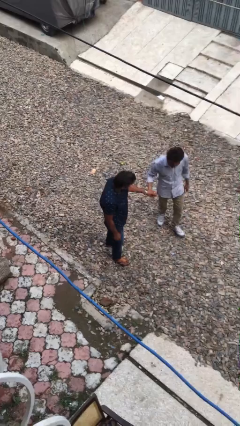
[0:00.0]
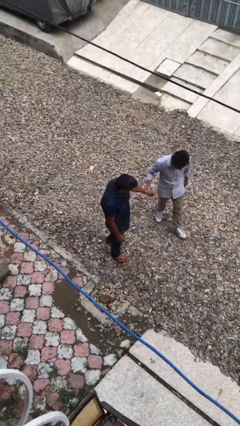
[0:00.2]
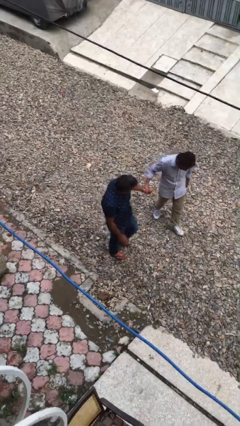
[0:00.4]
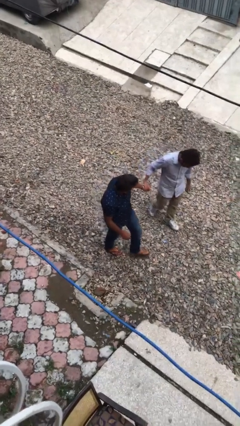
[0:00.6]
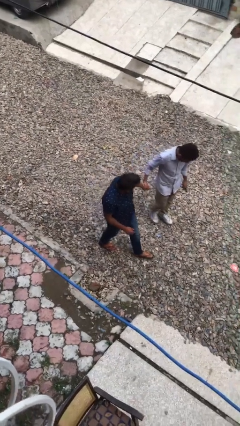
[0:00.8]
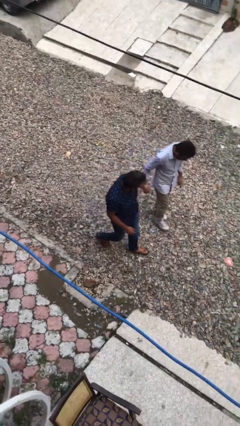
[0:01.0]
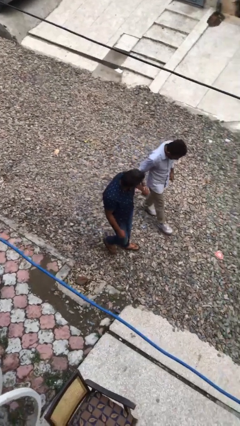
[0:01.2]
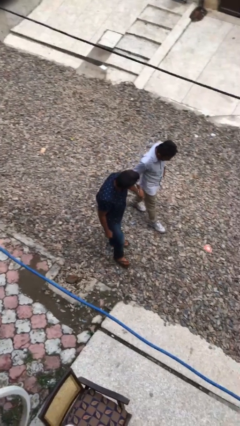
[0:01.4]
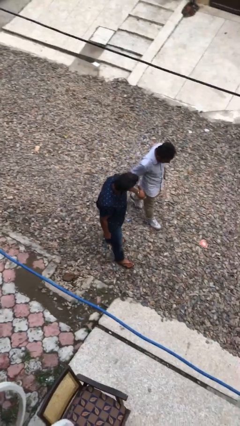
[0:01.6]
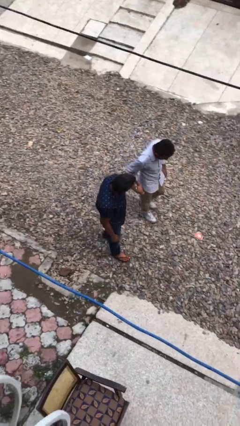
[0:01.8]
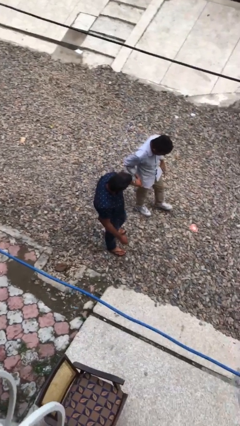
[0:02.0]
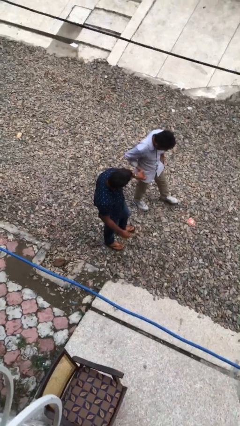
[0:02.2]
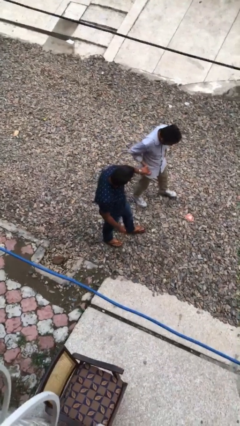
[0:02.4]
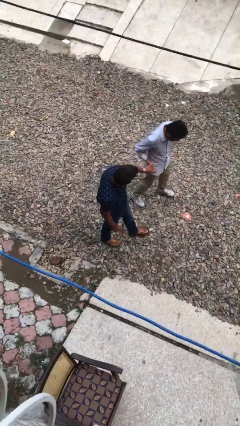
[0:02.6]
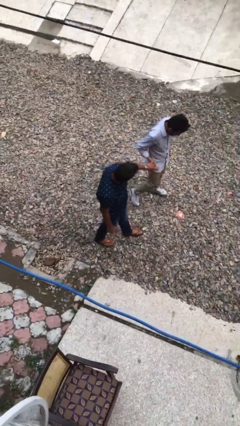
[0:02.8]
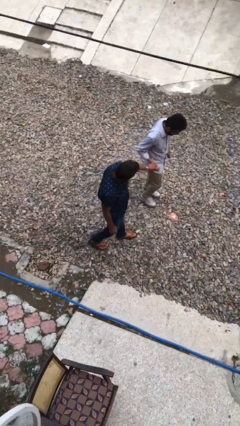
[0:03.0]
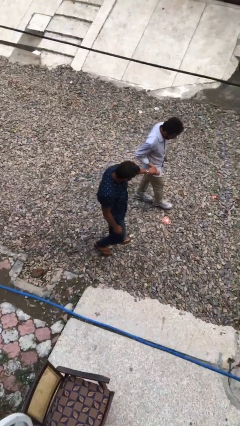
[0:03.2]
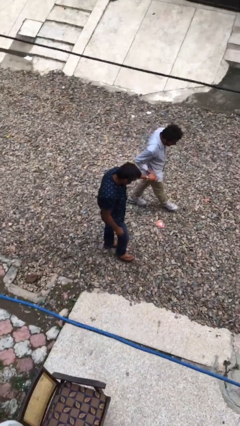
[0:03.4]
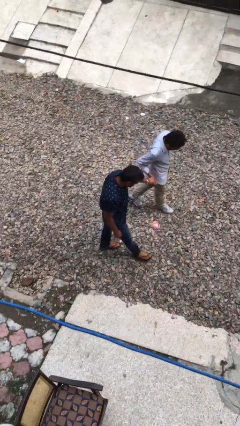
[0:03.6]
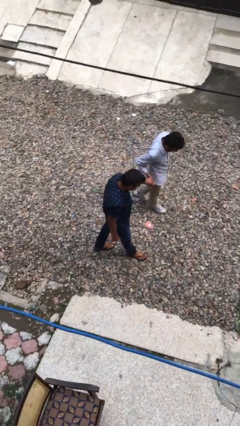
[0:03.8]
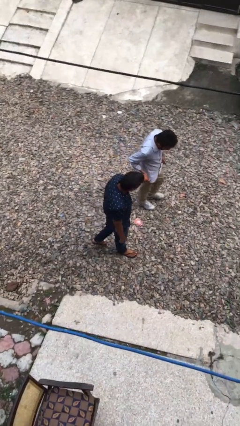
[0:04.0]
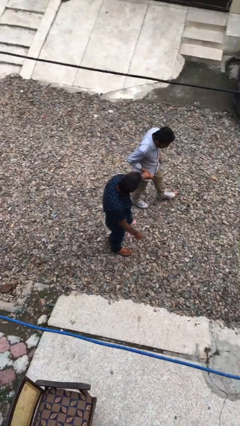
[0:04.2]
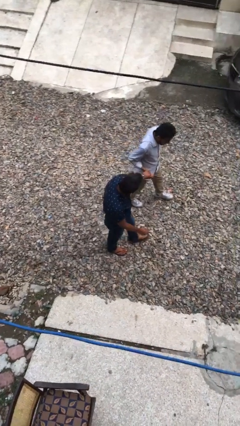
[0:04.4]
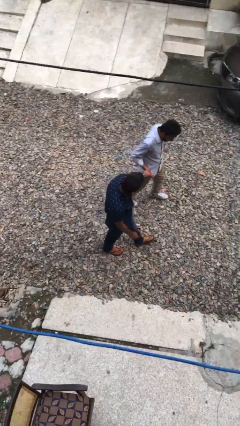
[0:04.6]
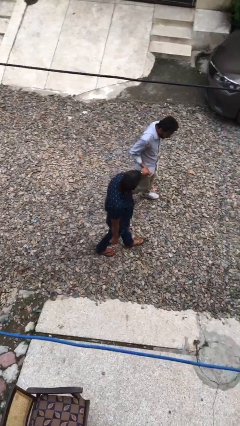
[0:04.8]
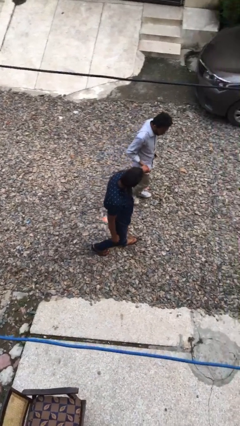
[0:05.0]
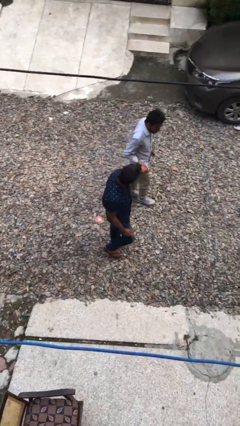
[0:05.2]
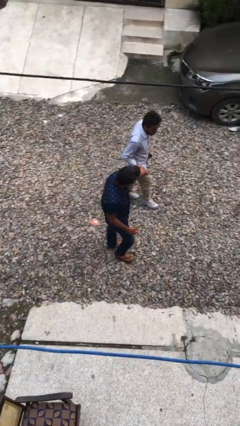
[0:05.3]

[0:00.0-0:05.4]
person holds hand

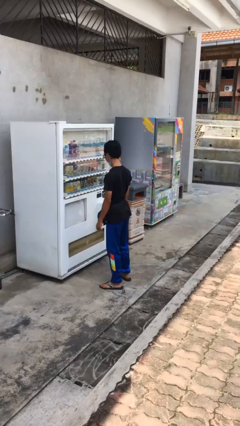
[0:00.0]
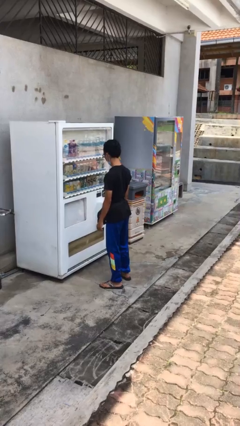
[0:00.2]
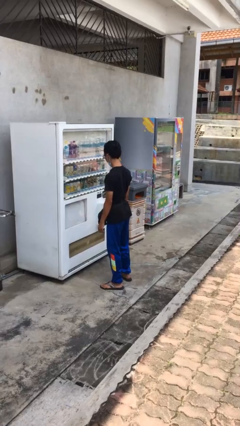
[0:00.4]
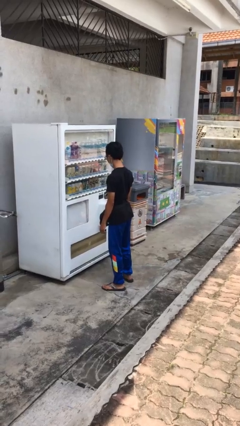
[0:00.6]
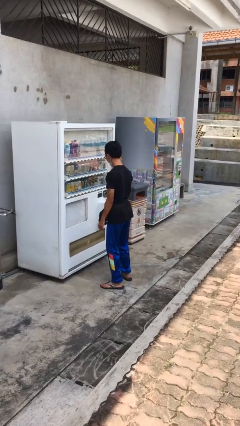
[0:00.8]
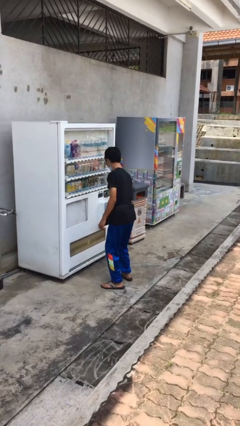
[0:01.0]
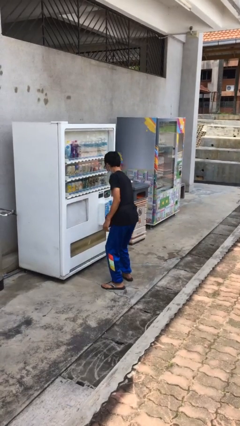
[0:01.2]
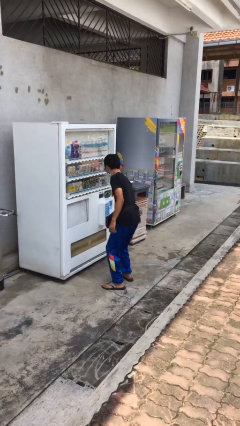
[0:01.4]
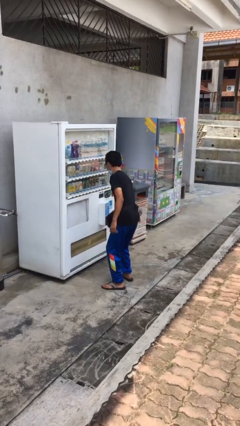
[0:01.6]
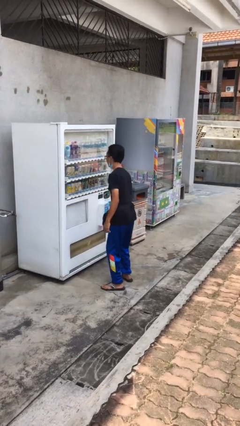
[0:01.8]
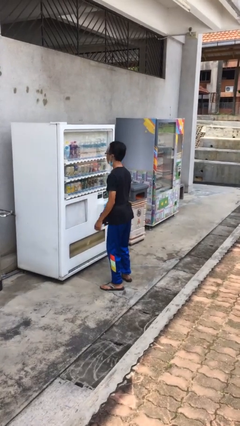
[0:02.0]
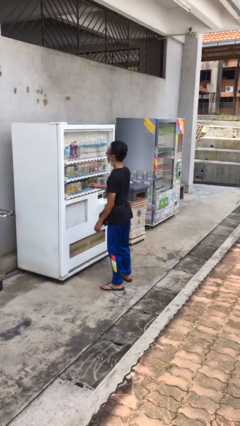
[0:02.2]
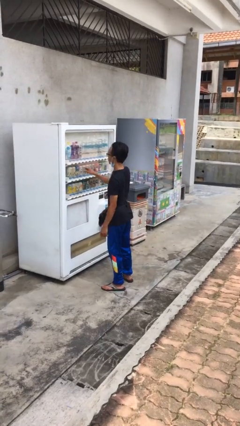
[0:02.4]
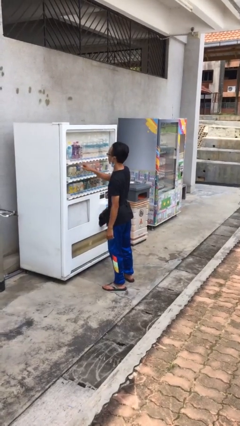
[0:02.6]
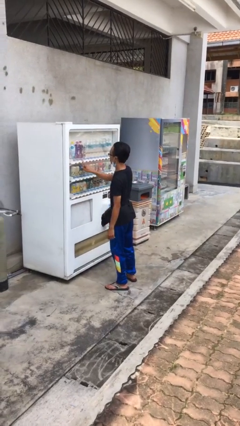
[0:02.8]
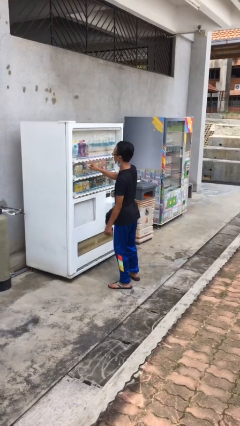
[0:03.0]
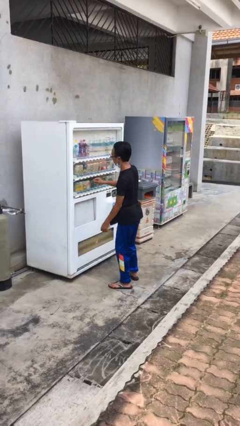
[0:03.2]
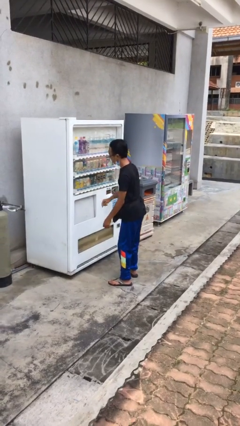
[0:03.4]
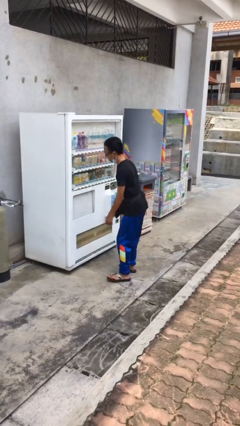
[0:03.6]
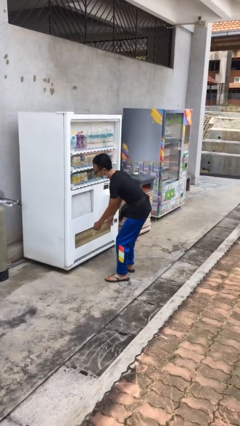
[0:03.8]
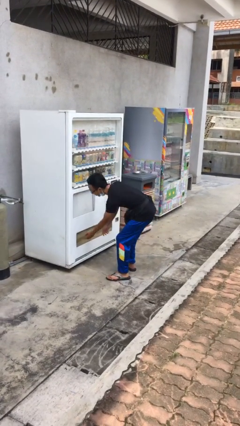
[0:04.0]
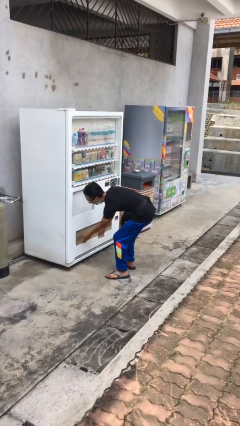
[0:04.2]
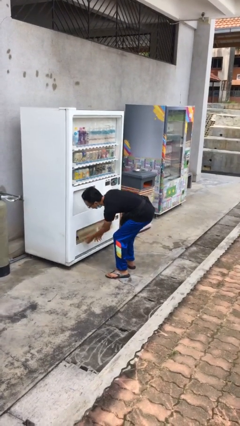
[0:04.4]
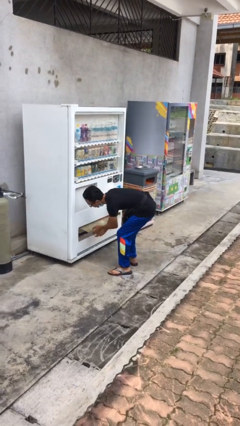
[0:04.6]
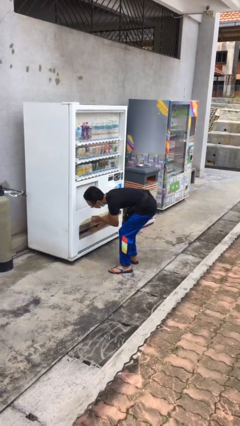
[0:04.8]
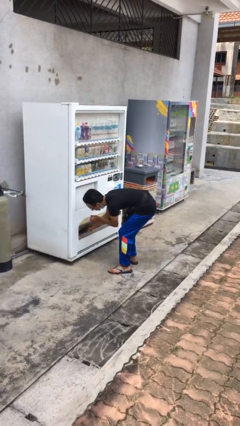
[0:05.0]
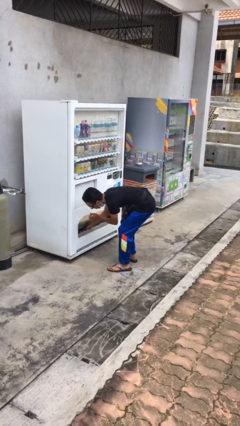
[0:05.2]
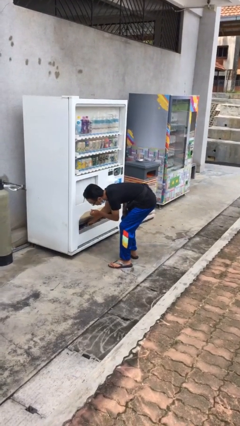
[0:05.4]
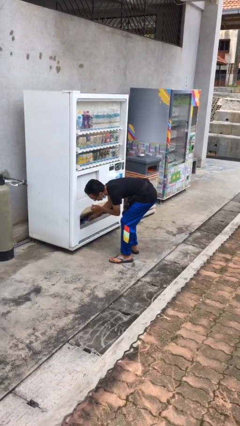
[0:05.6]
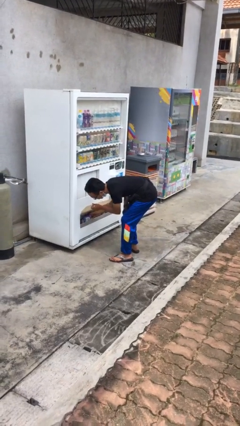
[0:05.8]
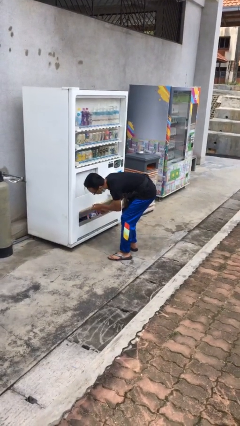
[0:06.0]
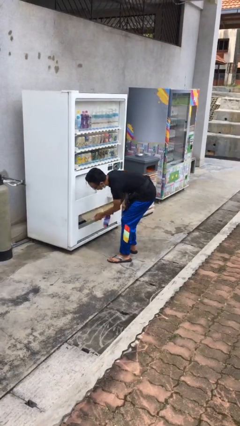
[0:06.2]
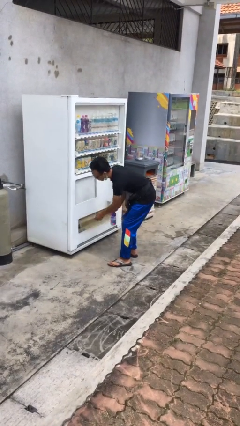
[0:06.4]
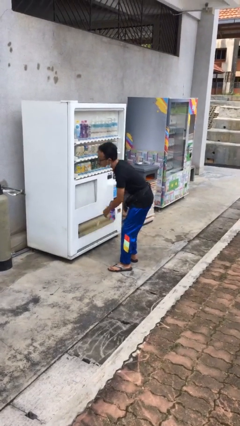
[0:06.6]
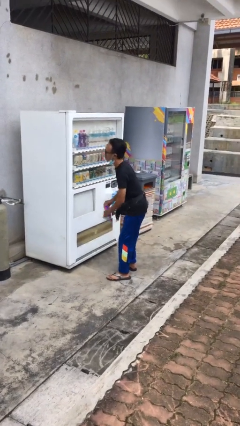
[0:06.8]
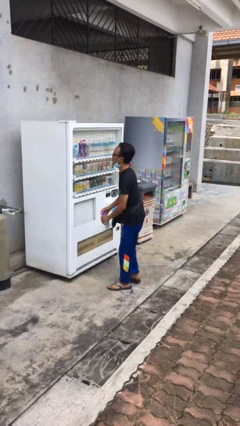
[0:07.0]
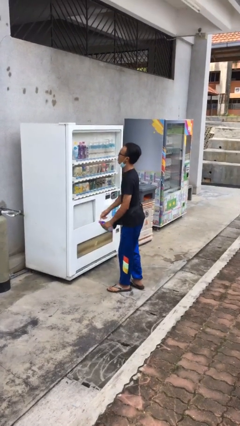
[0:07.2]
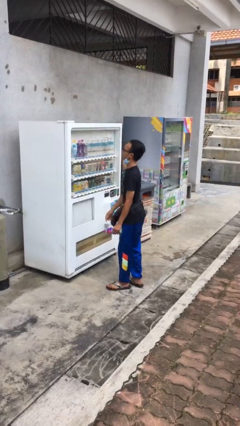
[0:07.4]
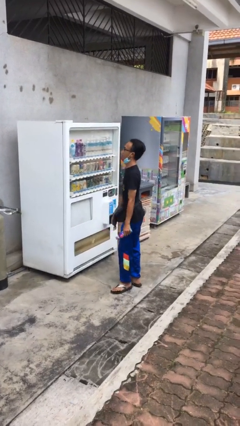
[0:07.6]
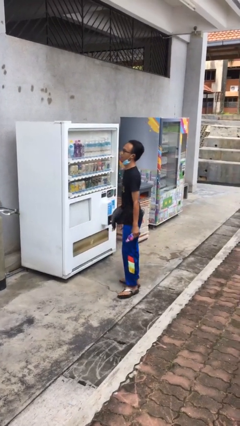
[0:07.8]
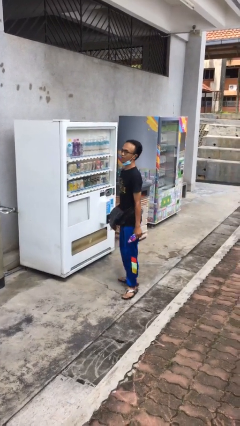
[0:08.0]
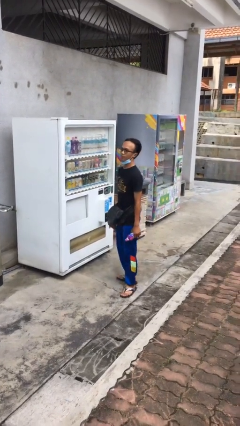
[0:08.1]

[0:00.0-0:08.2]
person purchases from machine

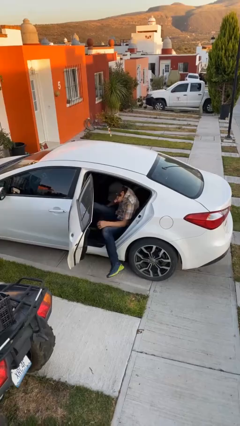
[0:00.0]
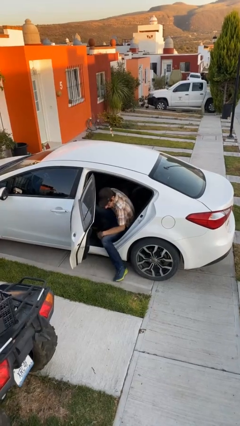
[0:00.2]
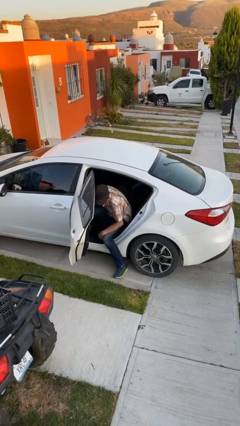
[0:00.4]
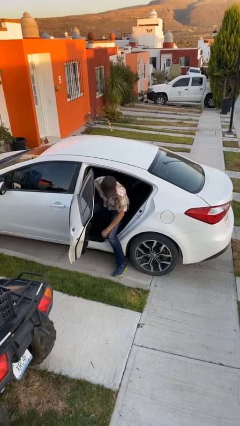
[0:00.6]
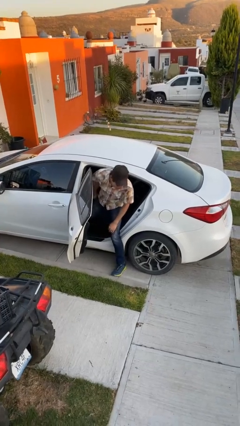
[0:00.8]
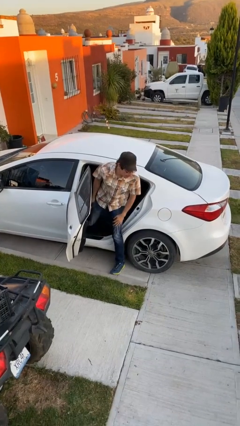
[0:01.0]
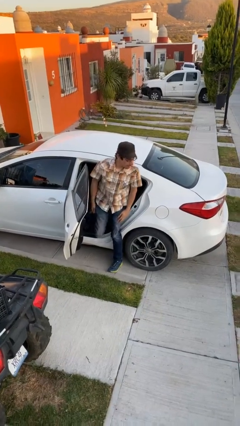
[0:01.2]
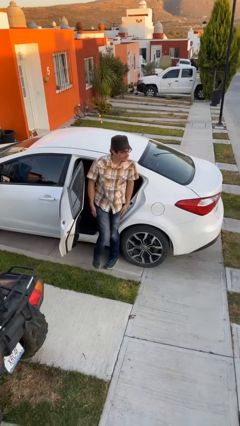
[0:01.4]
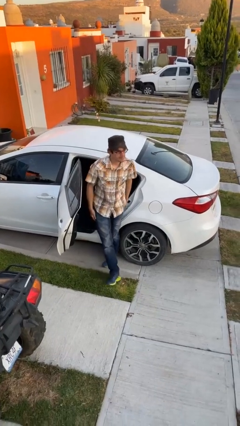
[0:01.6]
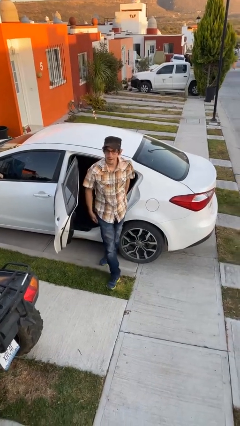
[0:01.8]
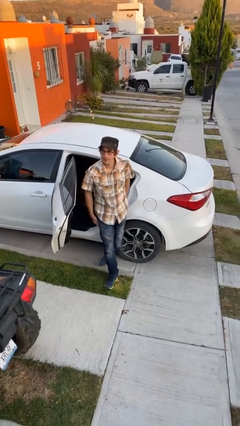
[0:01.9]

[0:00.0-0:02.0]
person exits car

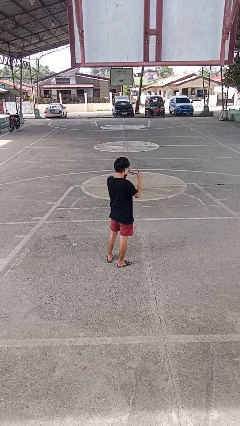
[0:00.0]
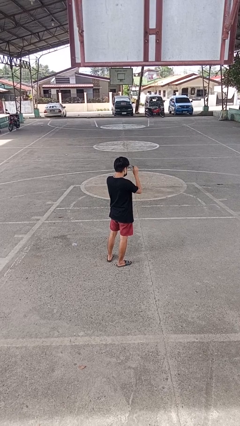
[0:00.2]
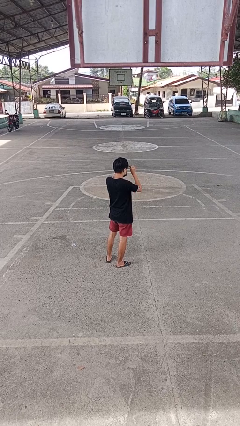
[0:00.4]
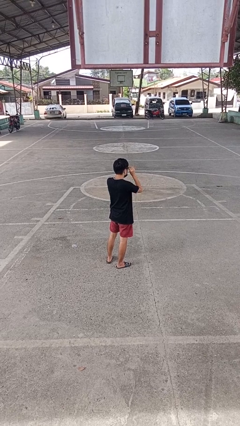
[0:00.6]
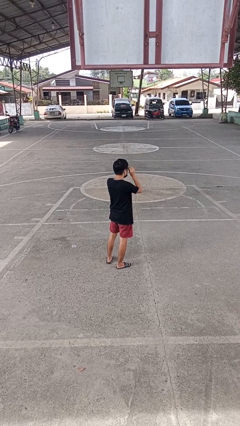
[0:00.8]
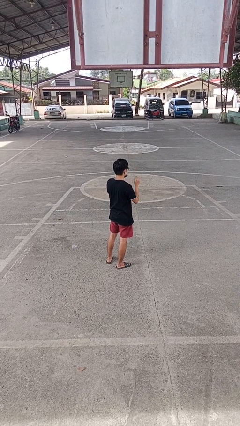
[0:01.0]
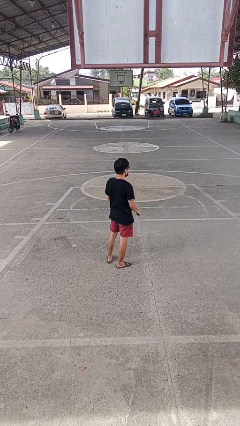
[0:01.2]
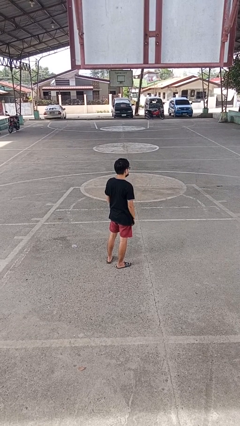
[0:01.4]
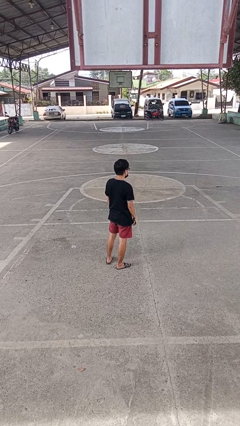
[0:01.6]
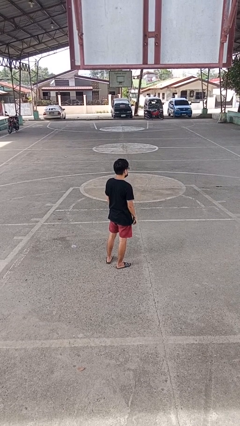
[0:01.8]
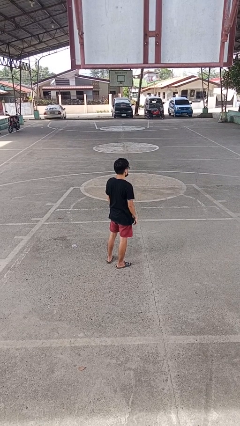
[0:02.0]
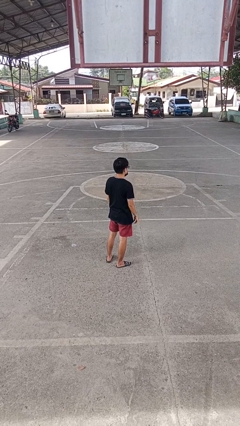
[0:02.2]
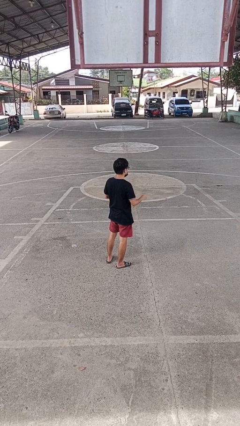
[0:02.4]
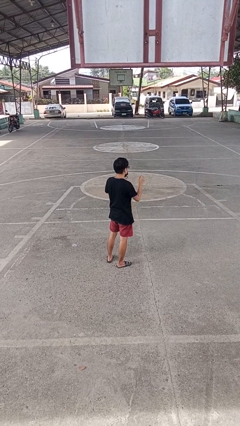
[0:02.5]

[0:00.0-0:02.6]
person puts on glasses
